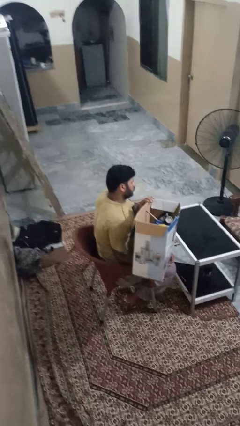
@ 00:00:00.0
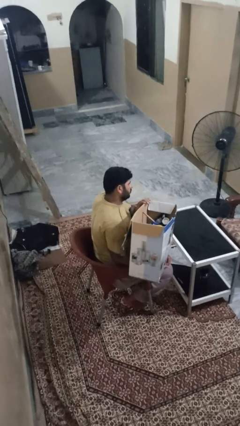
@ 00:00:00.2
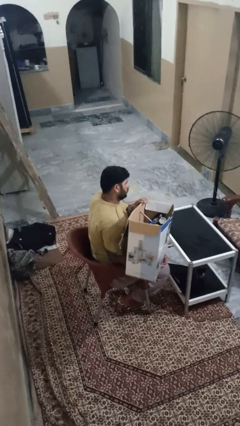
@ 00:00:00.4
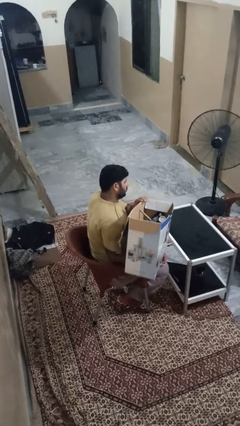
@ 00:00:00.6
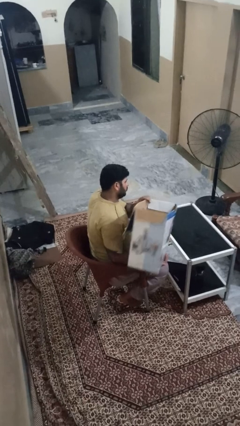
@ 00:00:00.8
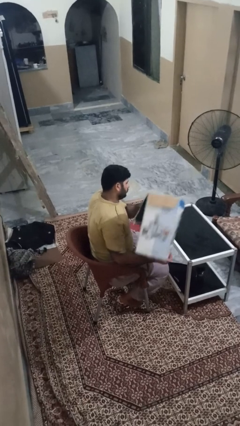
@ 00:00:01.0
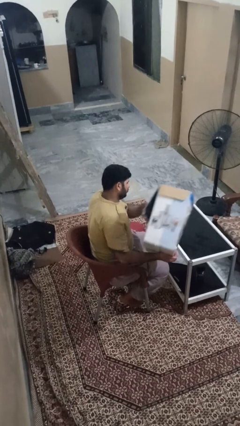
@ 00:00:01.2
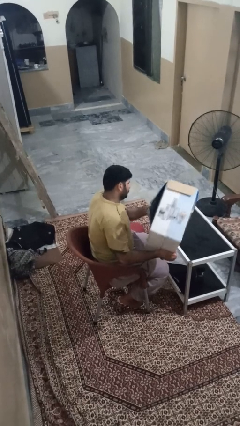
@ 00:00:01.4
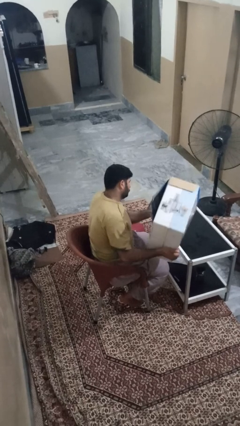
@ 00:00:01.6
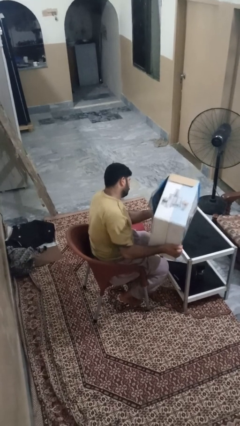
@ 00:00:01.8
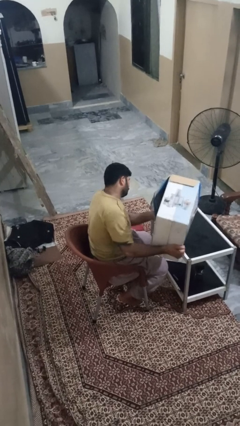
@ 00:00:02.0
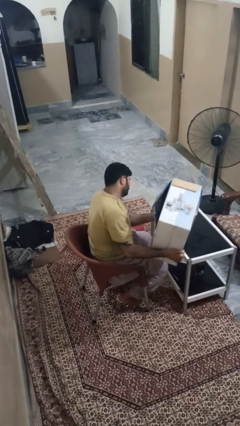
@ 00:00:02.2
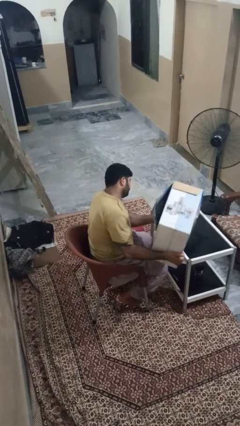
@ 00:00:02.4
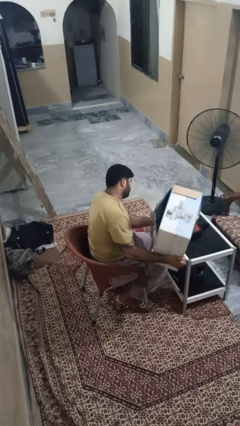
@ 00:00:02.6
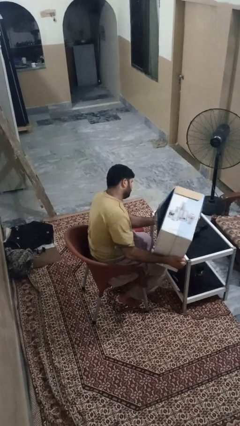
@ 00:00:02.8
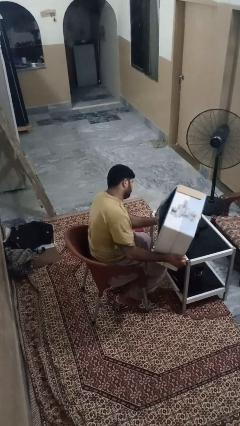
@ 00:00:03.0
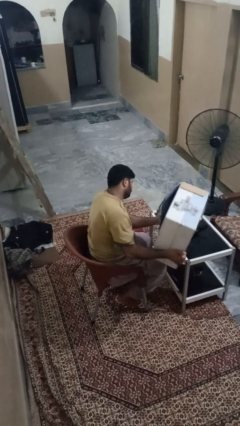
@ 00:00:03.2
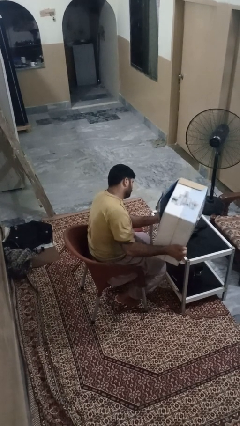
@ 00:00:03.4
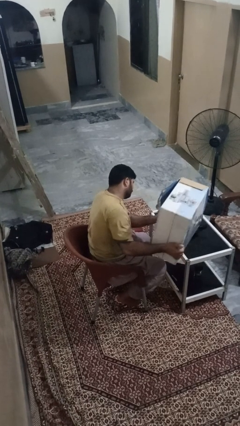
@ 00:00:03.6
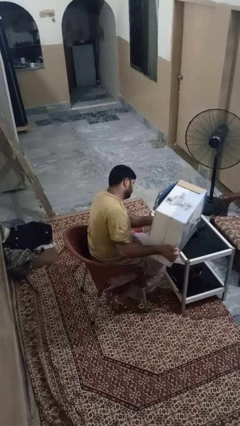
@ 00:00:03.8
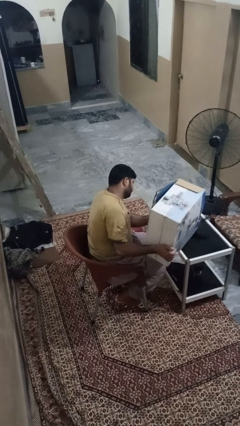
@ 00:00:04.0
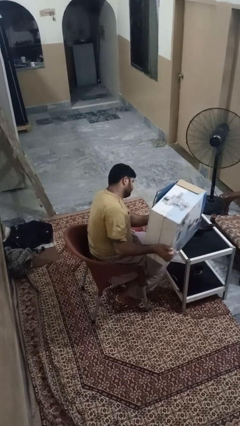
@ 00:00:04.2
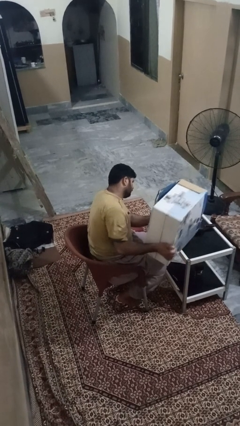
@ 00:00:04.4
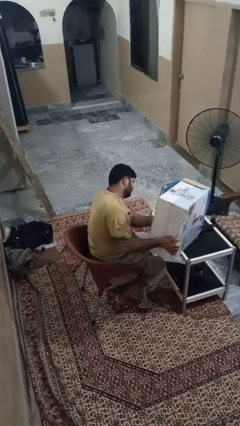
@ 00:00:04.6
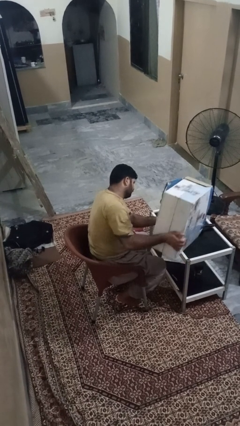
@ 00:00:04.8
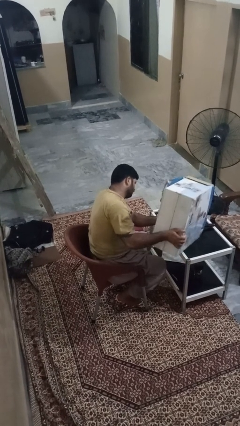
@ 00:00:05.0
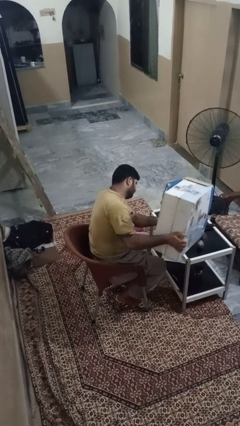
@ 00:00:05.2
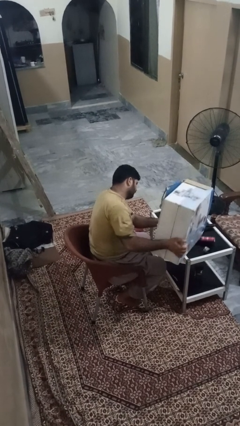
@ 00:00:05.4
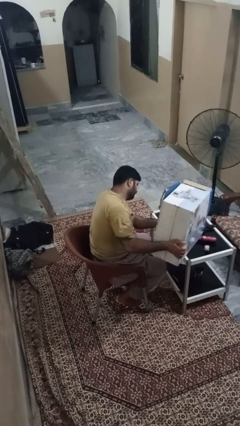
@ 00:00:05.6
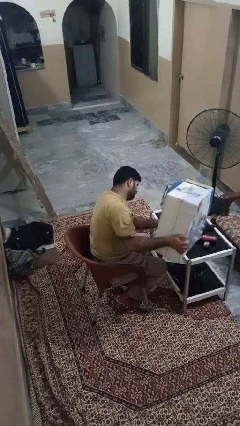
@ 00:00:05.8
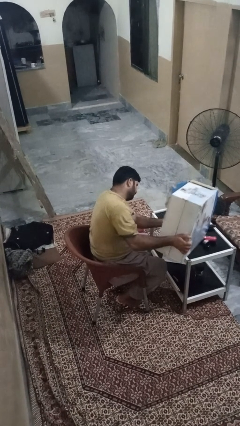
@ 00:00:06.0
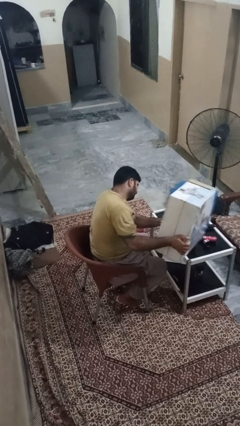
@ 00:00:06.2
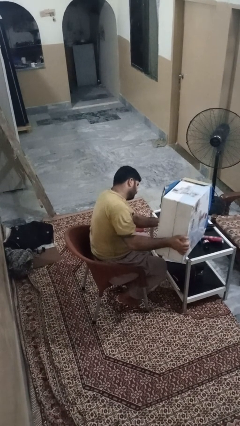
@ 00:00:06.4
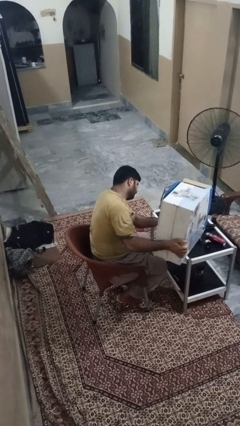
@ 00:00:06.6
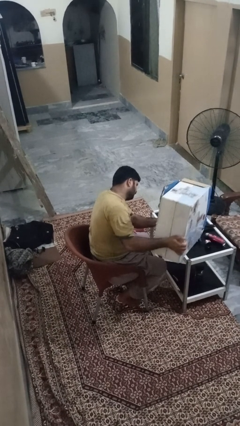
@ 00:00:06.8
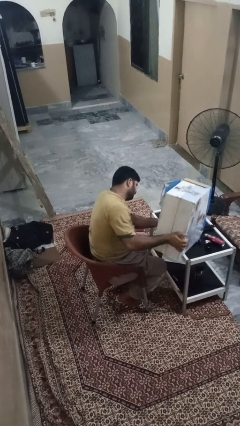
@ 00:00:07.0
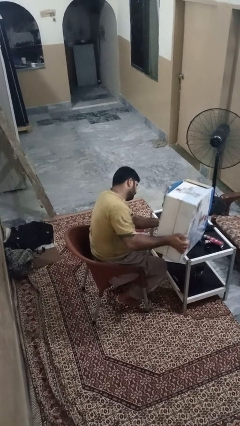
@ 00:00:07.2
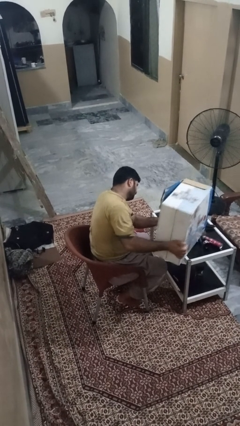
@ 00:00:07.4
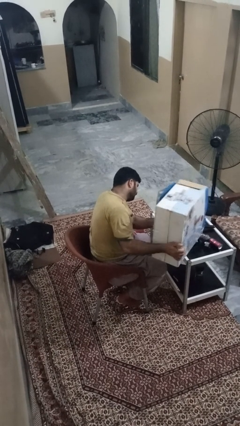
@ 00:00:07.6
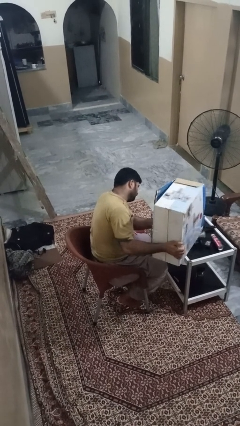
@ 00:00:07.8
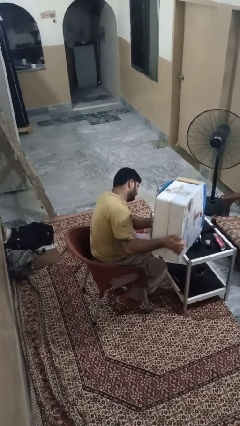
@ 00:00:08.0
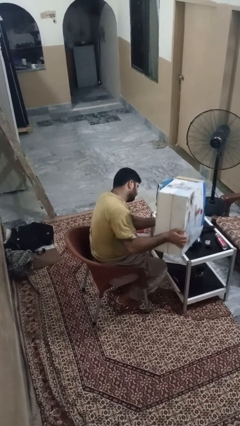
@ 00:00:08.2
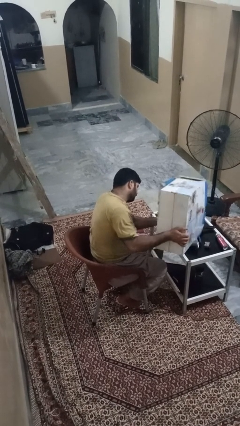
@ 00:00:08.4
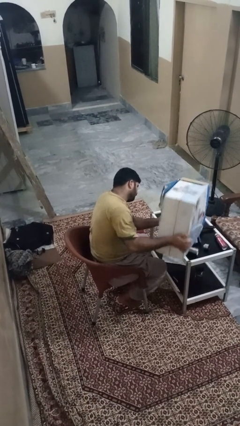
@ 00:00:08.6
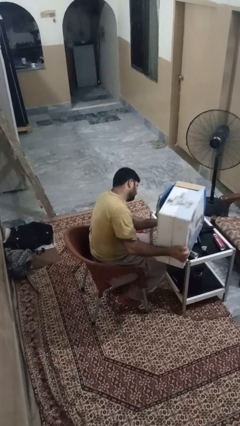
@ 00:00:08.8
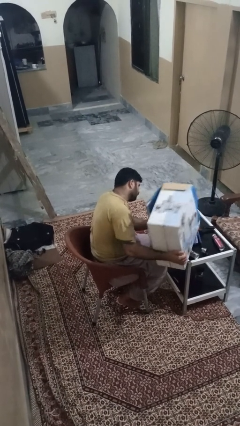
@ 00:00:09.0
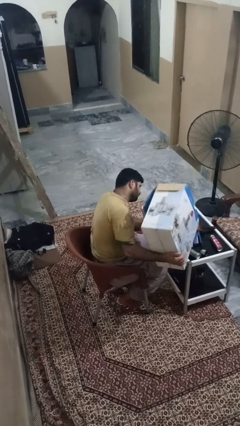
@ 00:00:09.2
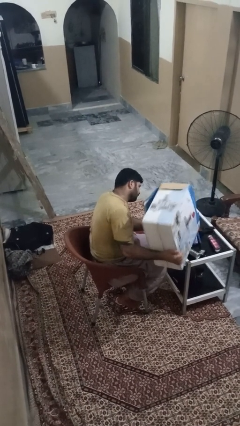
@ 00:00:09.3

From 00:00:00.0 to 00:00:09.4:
person unloads box onto table

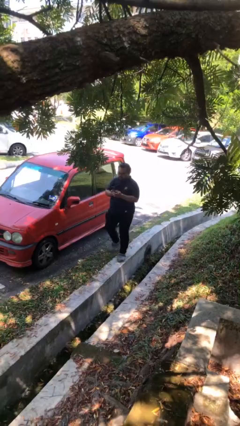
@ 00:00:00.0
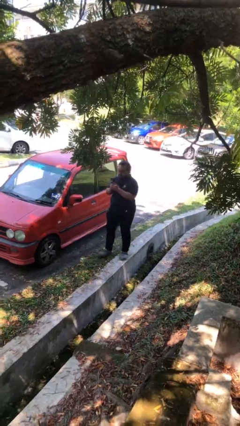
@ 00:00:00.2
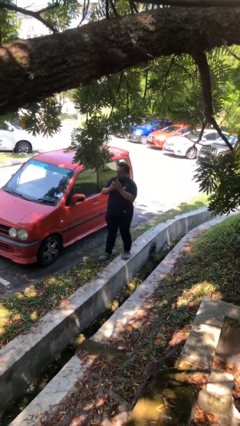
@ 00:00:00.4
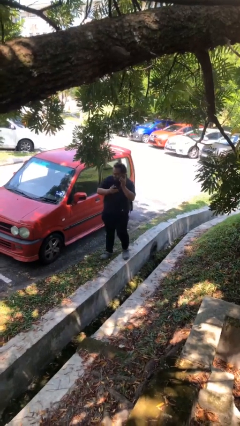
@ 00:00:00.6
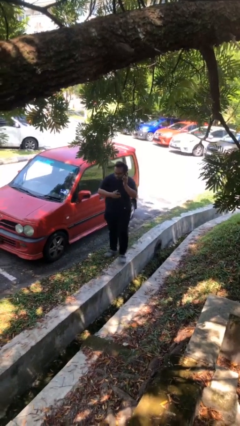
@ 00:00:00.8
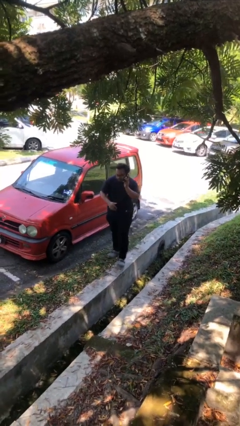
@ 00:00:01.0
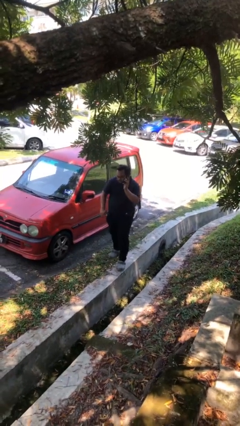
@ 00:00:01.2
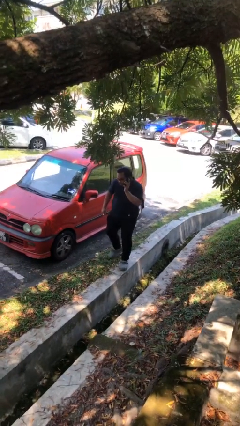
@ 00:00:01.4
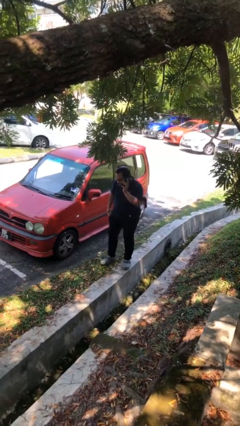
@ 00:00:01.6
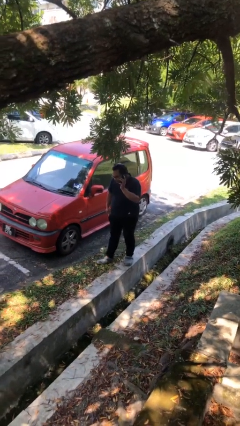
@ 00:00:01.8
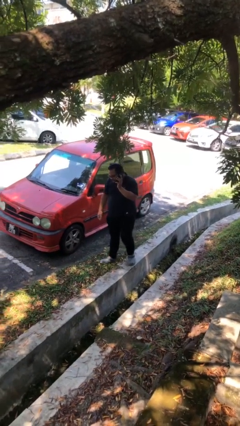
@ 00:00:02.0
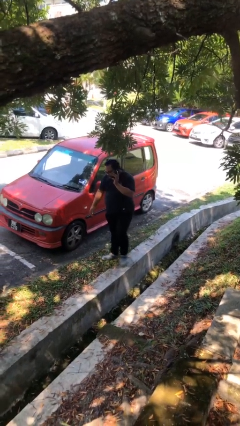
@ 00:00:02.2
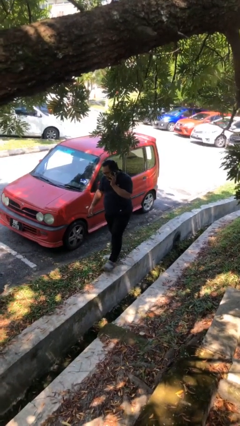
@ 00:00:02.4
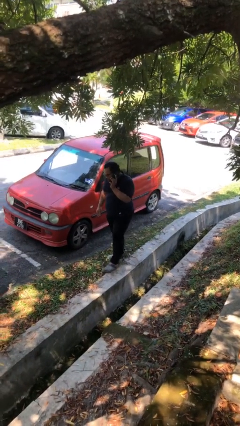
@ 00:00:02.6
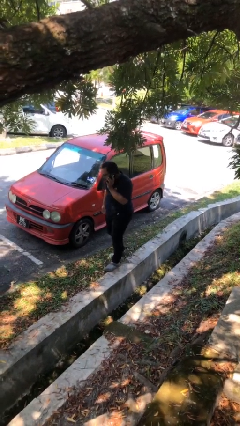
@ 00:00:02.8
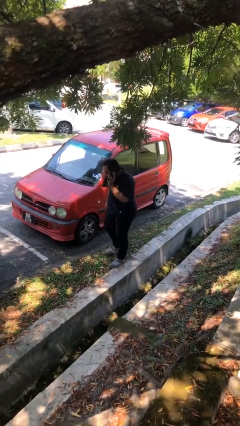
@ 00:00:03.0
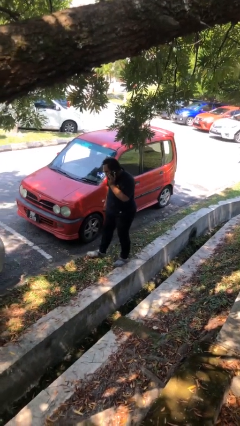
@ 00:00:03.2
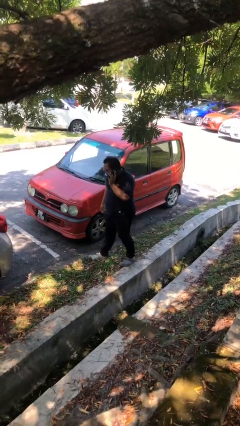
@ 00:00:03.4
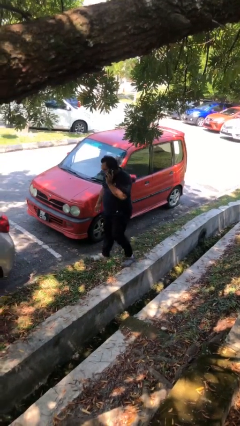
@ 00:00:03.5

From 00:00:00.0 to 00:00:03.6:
person talks on phone

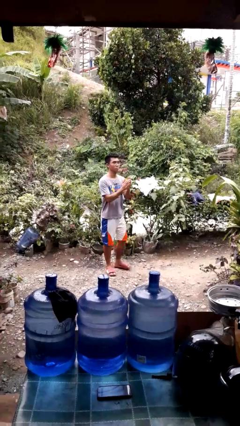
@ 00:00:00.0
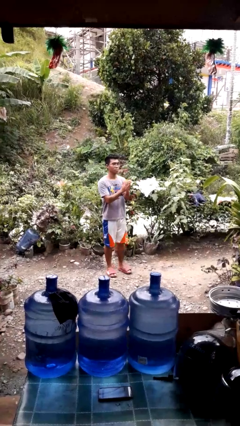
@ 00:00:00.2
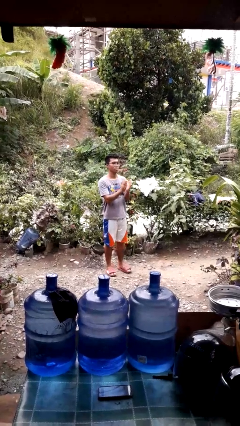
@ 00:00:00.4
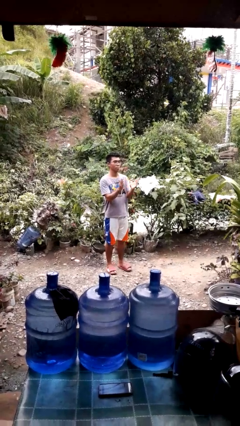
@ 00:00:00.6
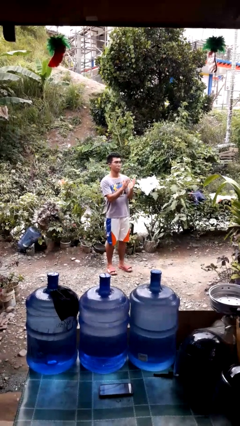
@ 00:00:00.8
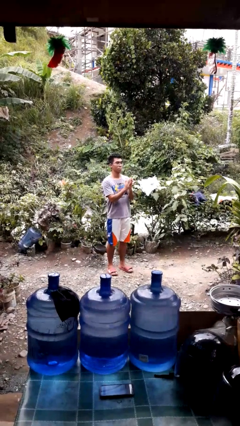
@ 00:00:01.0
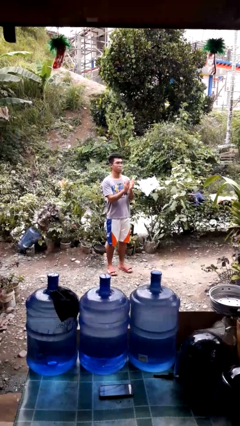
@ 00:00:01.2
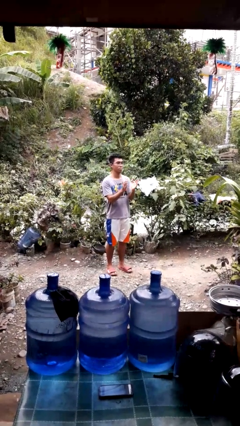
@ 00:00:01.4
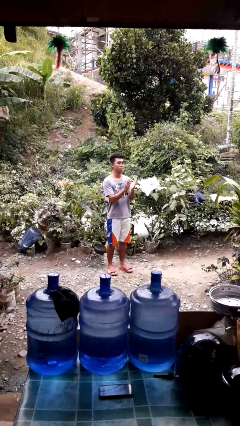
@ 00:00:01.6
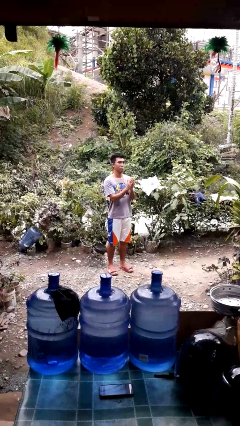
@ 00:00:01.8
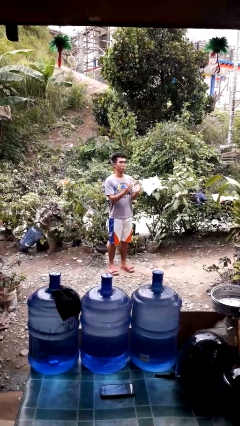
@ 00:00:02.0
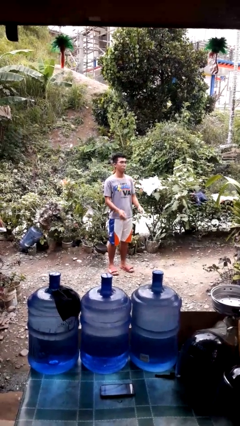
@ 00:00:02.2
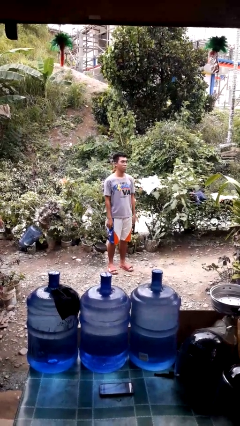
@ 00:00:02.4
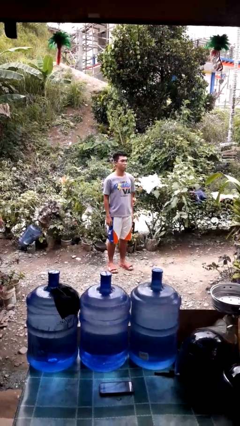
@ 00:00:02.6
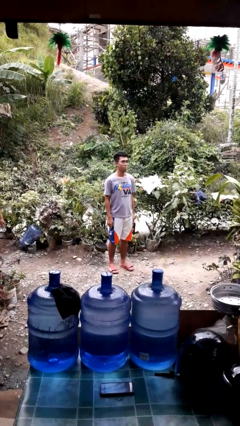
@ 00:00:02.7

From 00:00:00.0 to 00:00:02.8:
person claps hands

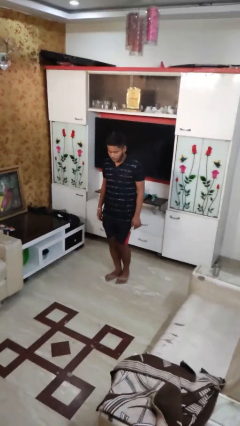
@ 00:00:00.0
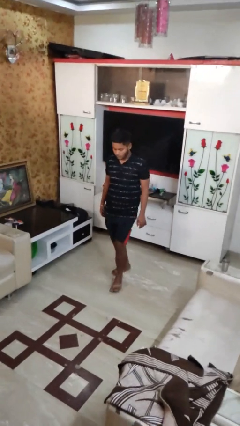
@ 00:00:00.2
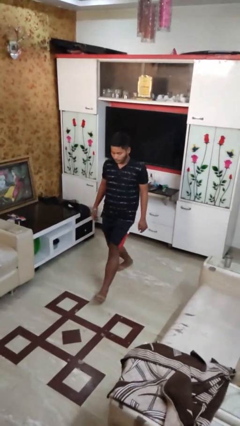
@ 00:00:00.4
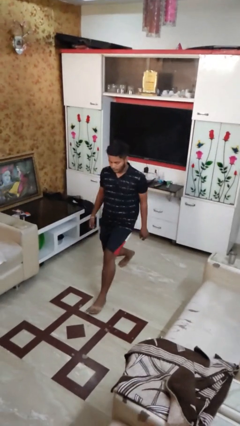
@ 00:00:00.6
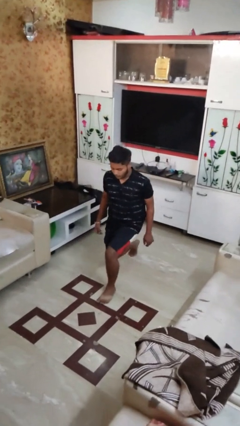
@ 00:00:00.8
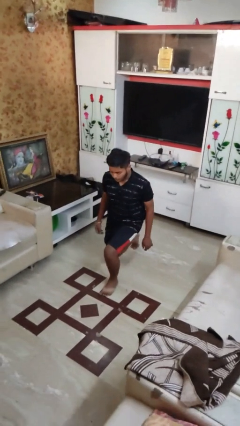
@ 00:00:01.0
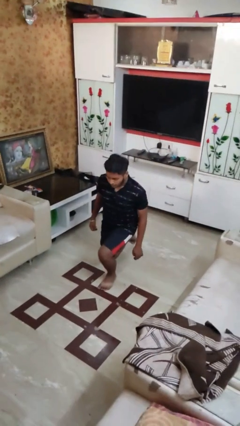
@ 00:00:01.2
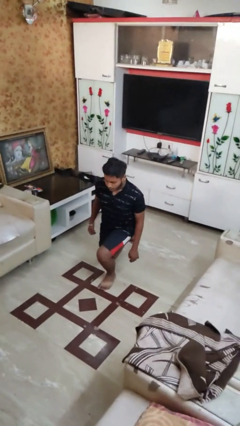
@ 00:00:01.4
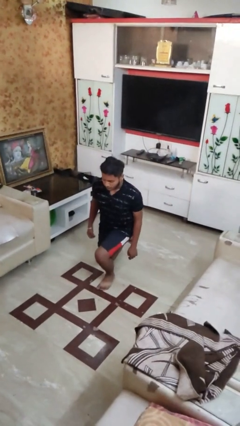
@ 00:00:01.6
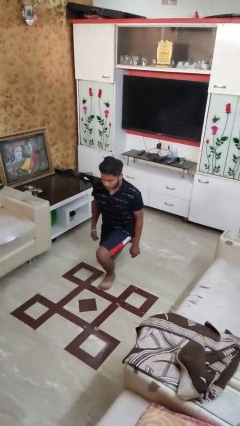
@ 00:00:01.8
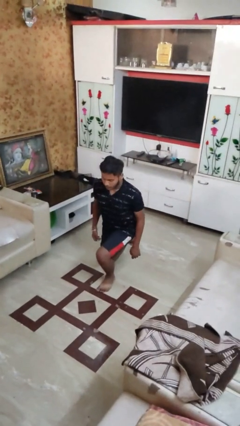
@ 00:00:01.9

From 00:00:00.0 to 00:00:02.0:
person exercises with lunges
